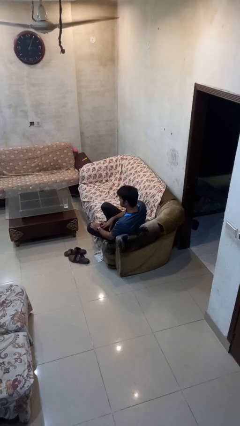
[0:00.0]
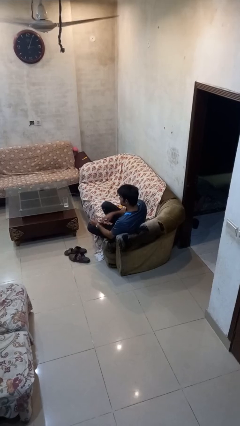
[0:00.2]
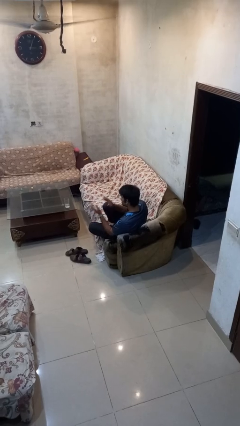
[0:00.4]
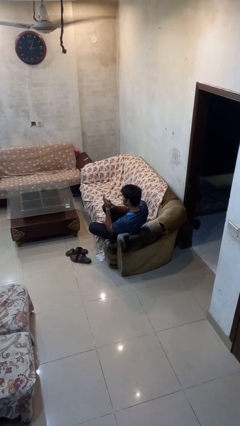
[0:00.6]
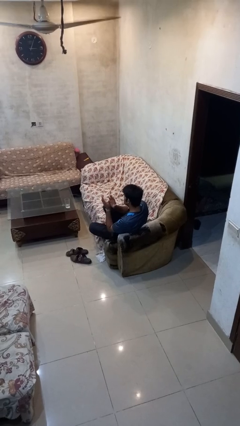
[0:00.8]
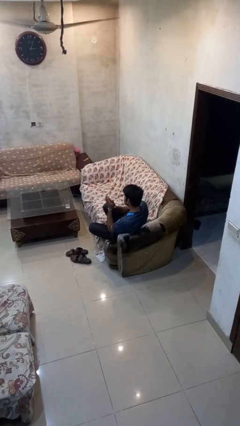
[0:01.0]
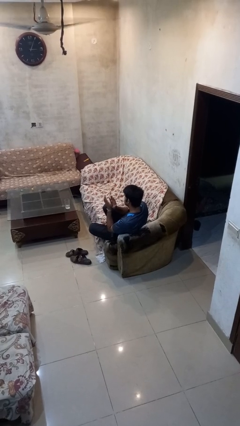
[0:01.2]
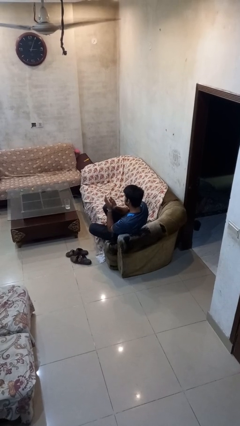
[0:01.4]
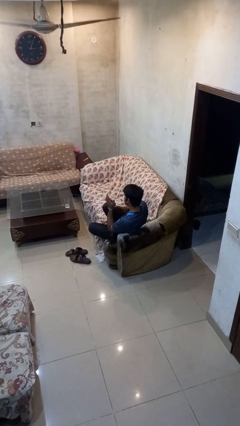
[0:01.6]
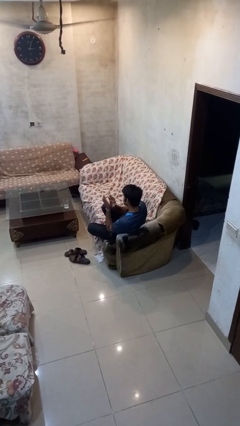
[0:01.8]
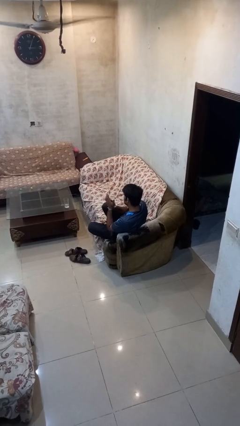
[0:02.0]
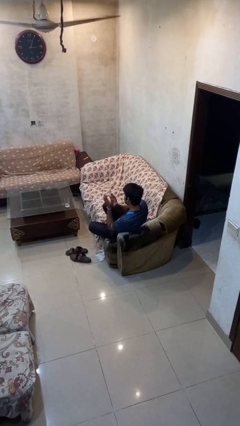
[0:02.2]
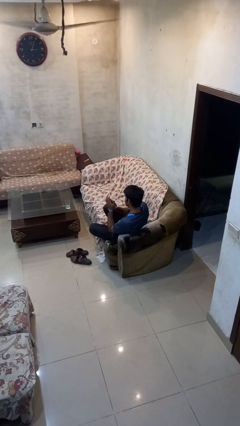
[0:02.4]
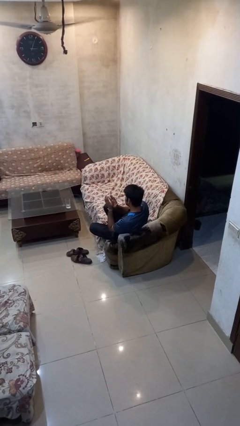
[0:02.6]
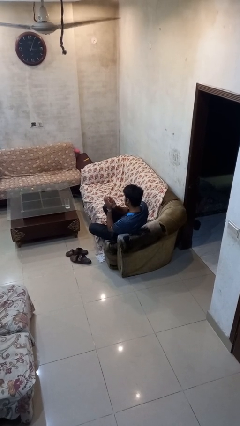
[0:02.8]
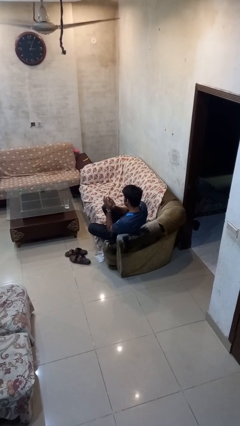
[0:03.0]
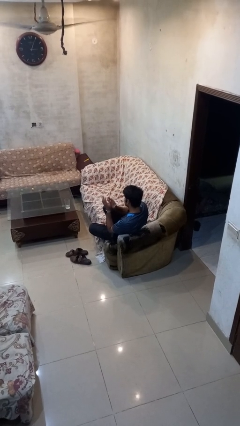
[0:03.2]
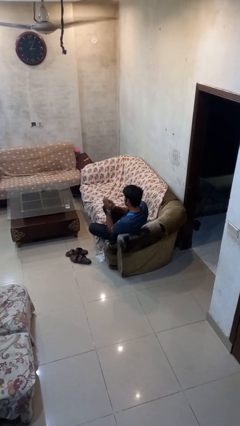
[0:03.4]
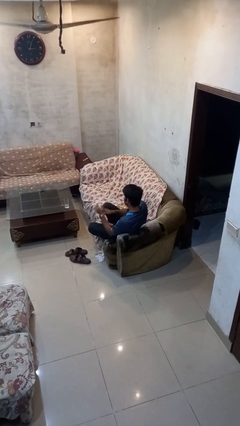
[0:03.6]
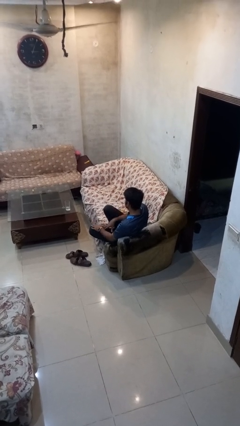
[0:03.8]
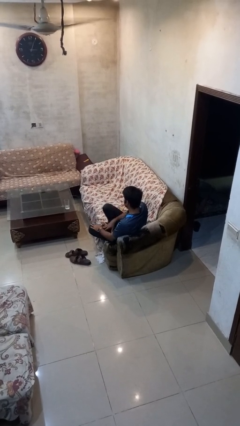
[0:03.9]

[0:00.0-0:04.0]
person claps hands

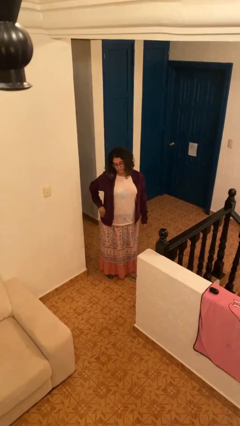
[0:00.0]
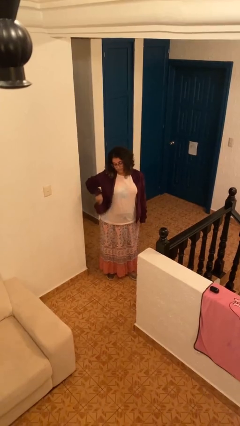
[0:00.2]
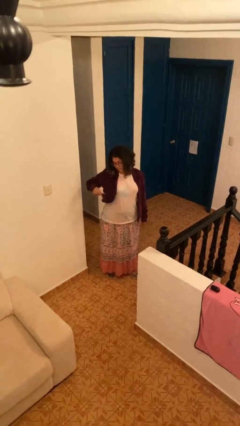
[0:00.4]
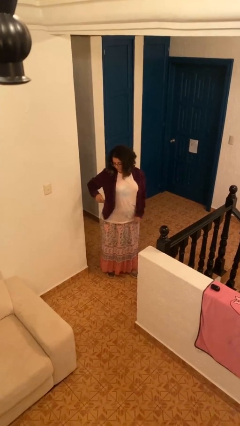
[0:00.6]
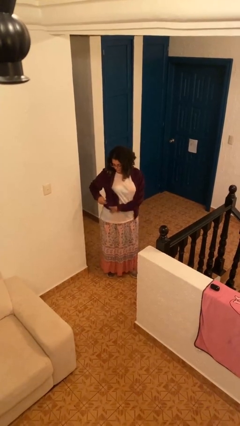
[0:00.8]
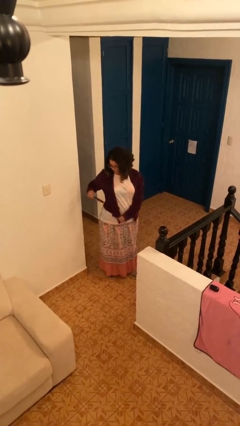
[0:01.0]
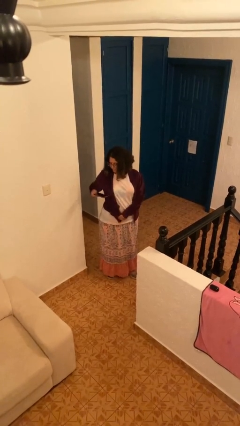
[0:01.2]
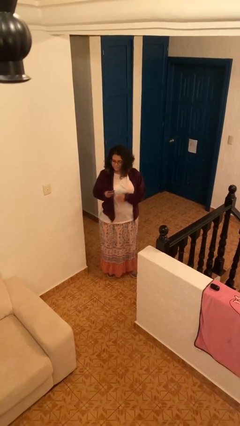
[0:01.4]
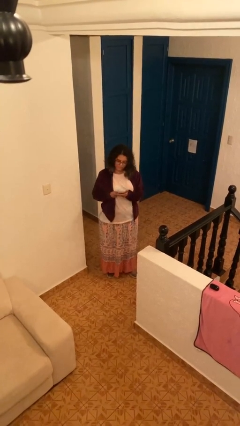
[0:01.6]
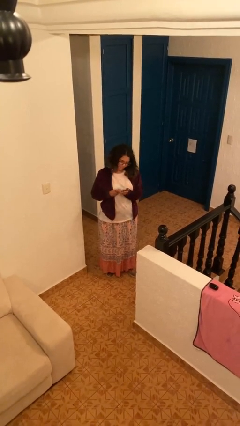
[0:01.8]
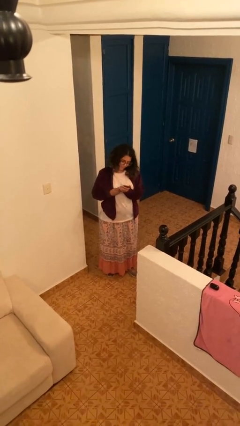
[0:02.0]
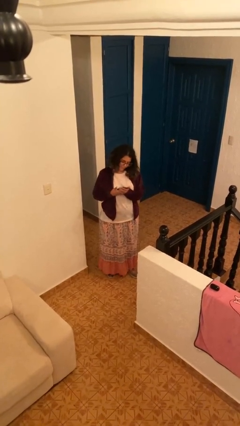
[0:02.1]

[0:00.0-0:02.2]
person takes phone from pocket

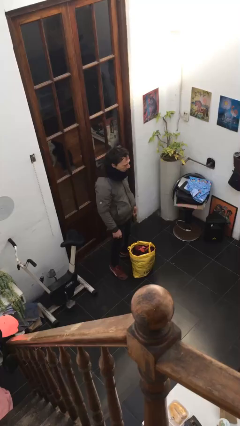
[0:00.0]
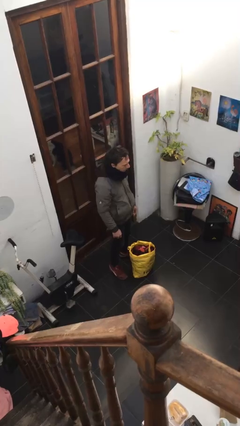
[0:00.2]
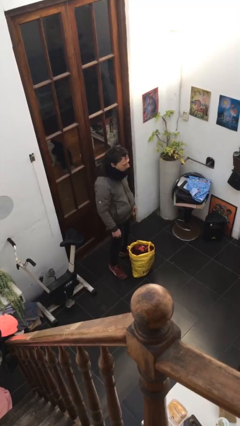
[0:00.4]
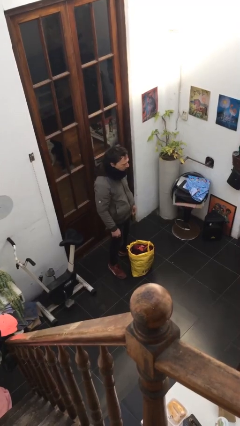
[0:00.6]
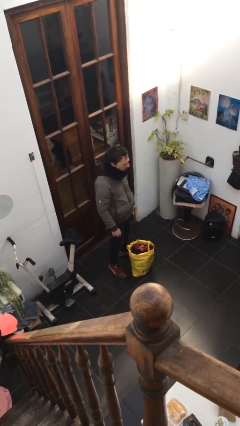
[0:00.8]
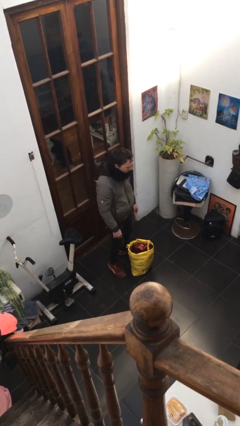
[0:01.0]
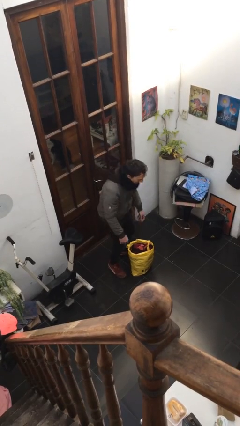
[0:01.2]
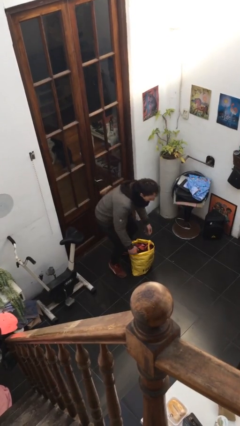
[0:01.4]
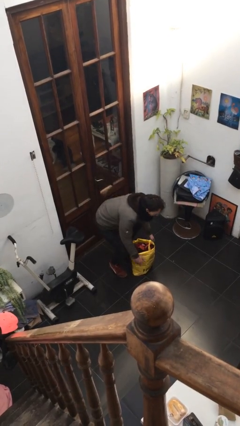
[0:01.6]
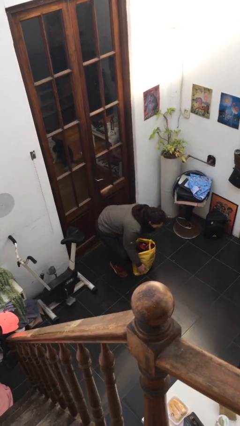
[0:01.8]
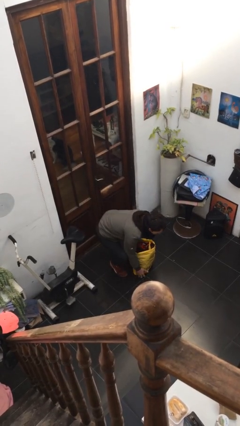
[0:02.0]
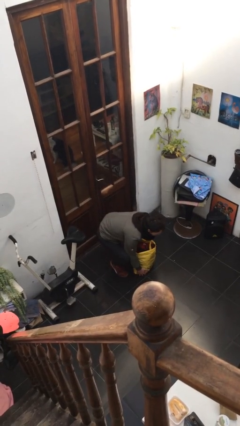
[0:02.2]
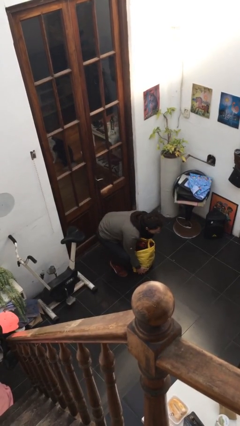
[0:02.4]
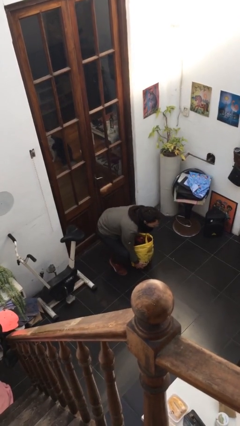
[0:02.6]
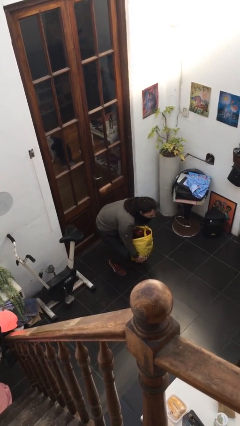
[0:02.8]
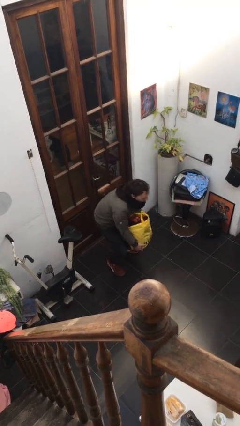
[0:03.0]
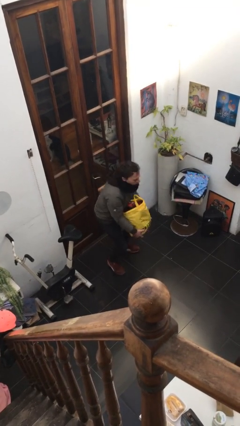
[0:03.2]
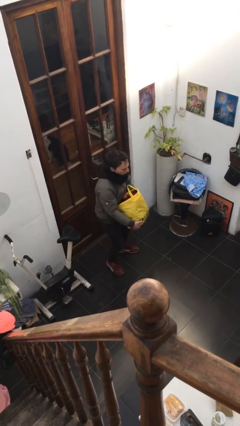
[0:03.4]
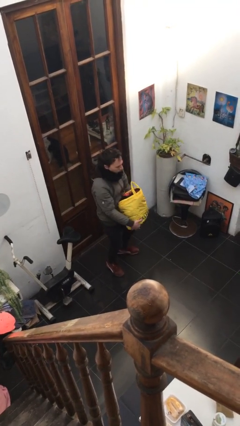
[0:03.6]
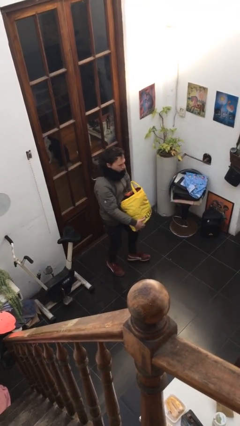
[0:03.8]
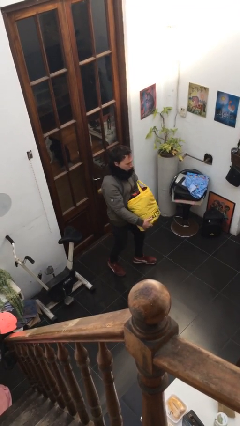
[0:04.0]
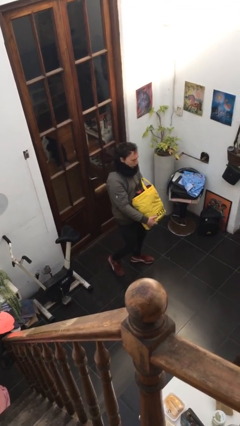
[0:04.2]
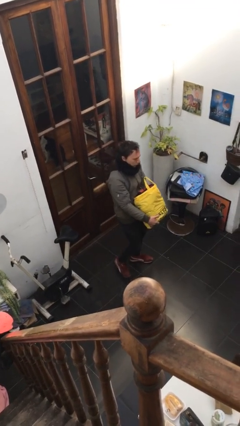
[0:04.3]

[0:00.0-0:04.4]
person picks up object from floor

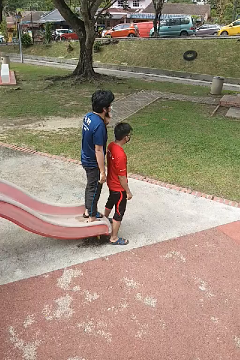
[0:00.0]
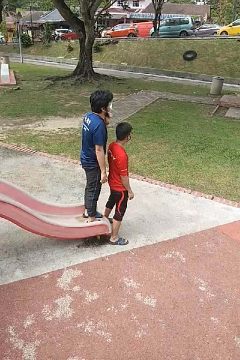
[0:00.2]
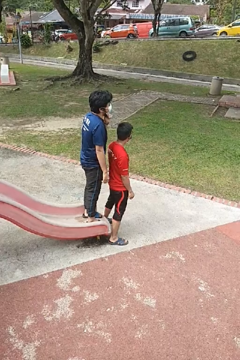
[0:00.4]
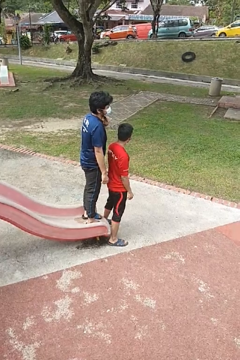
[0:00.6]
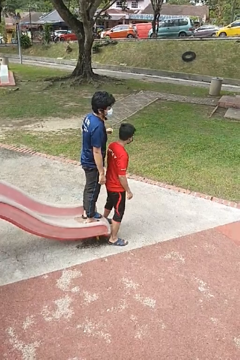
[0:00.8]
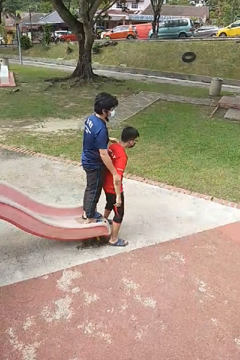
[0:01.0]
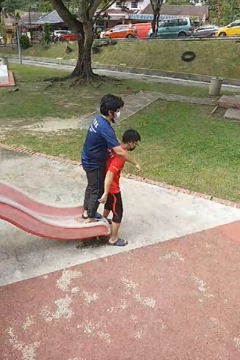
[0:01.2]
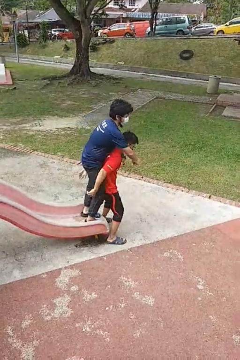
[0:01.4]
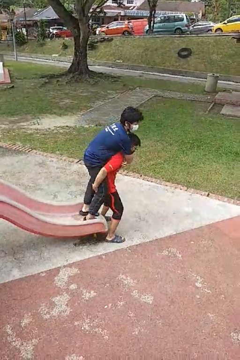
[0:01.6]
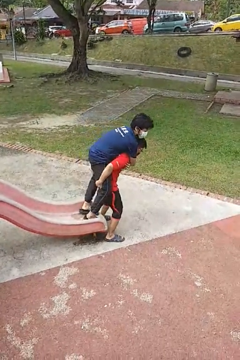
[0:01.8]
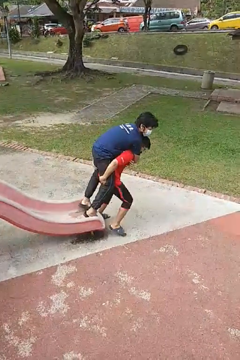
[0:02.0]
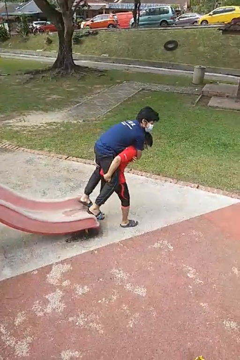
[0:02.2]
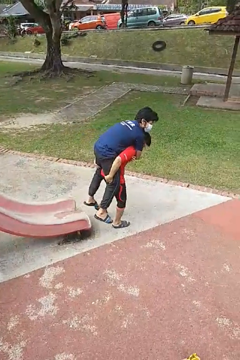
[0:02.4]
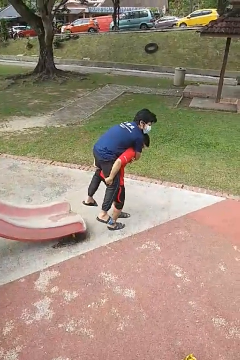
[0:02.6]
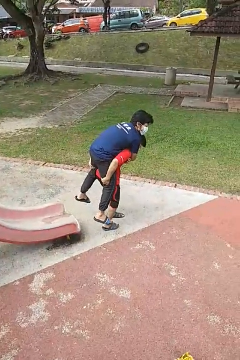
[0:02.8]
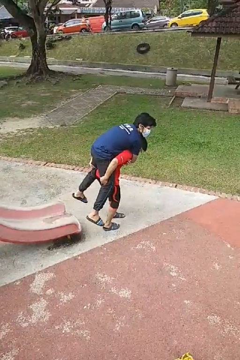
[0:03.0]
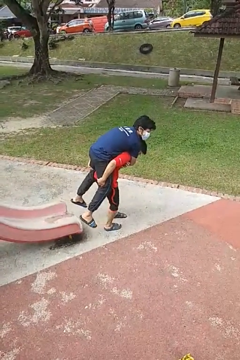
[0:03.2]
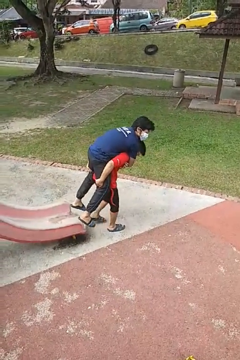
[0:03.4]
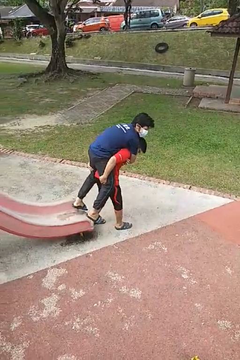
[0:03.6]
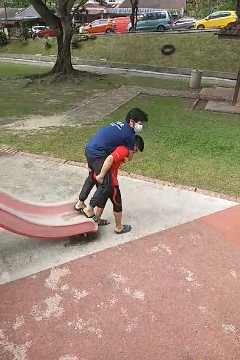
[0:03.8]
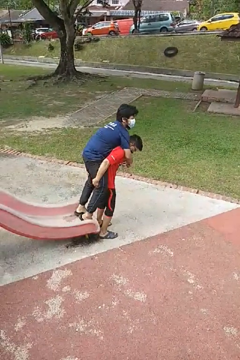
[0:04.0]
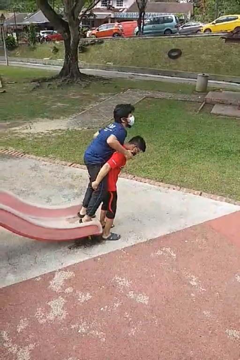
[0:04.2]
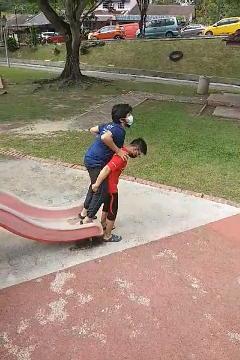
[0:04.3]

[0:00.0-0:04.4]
person carries person on back

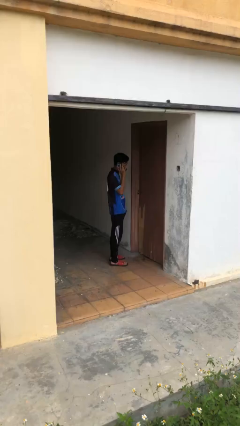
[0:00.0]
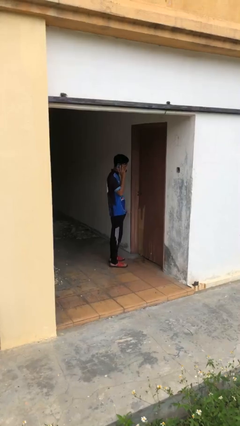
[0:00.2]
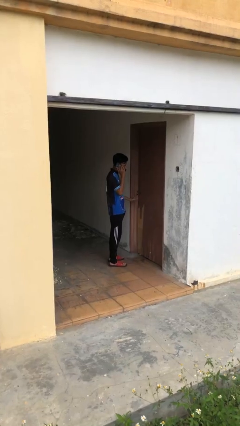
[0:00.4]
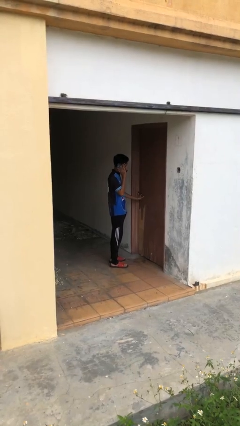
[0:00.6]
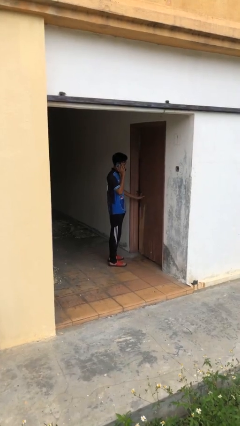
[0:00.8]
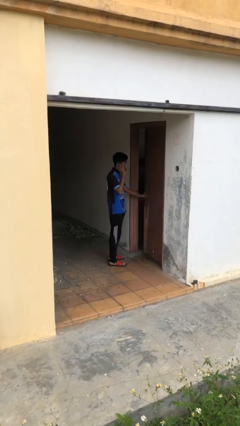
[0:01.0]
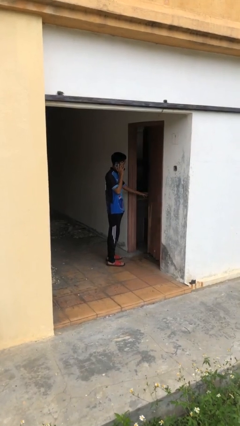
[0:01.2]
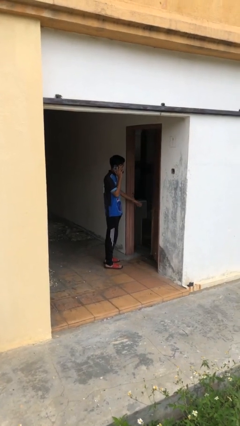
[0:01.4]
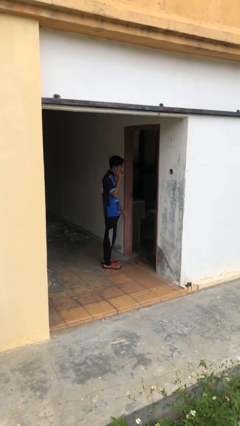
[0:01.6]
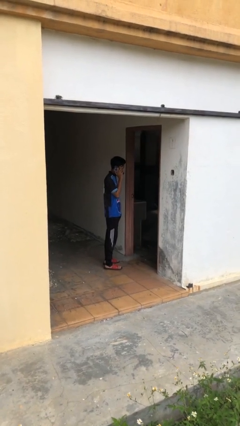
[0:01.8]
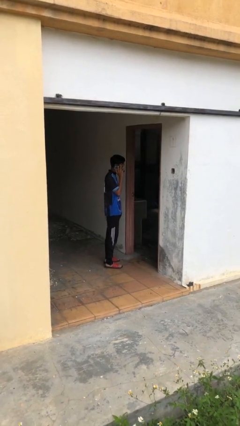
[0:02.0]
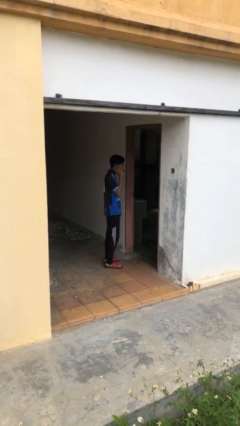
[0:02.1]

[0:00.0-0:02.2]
person opens facility door

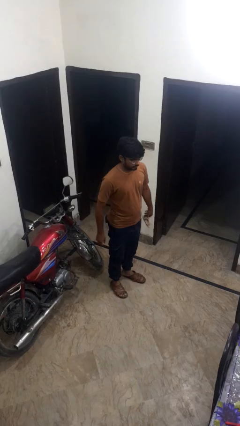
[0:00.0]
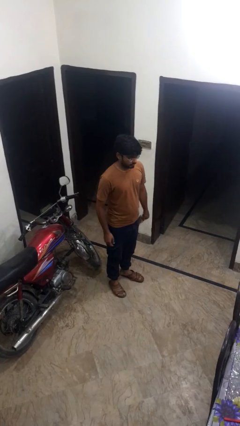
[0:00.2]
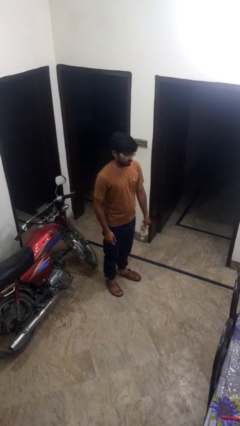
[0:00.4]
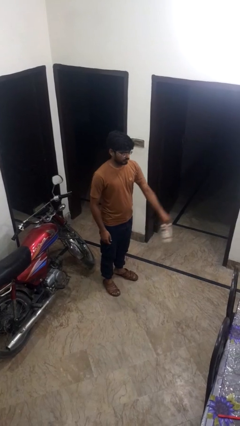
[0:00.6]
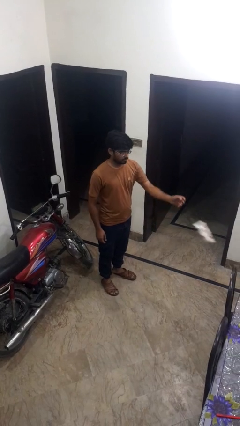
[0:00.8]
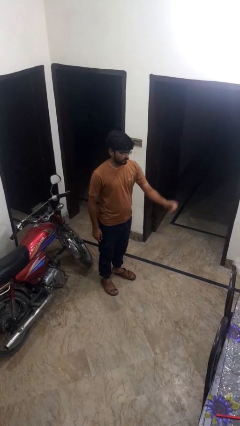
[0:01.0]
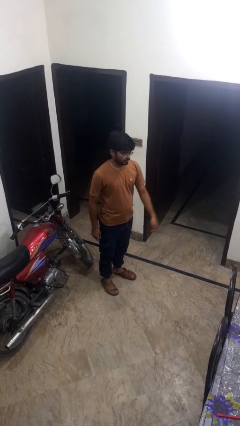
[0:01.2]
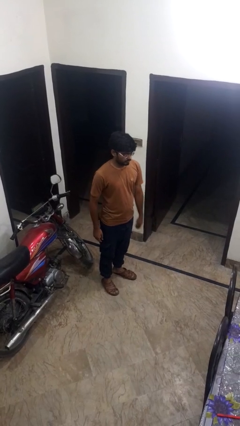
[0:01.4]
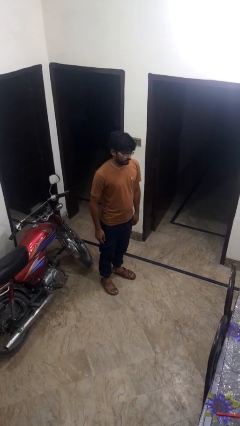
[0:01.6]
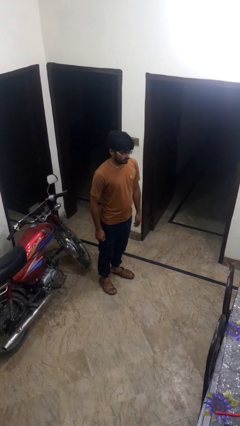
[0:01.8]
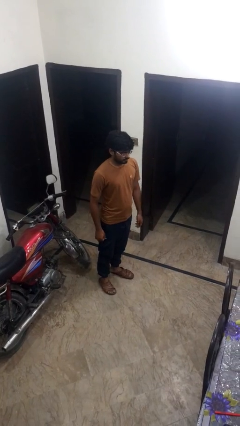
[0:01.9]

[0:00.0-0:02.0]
person throws object on table
